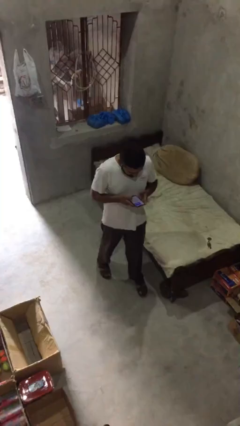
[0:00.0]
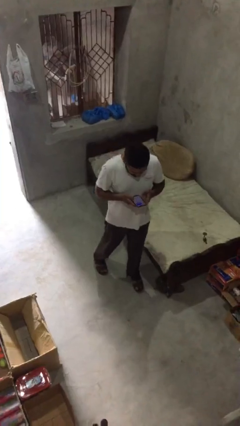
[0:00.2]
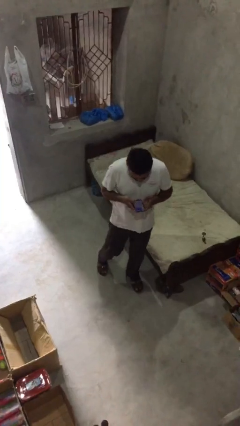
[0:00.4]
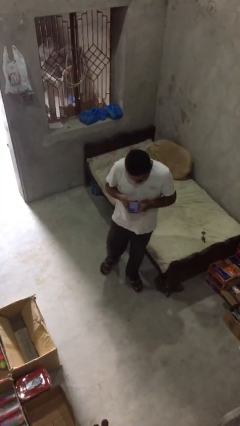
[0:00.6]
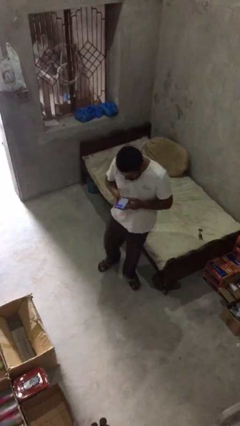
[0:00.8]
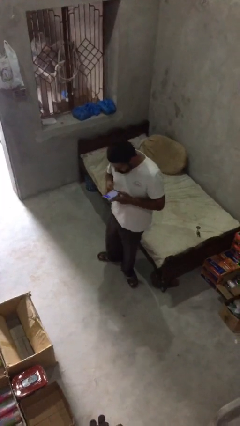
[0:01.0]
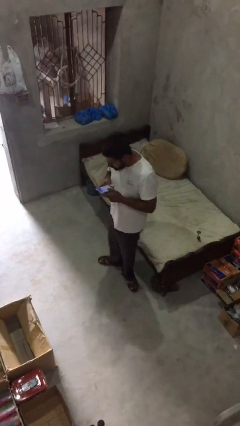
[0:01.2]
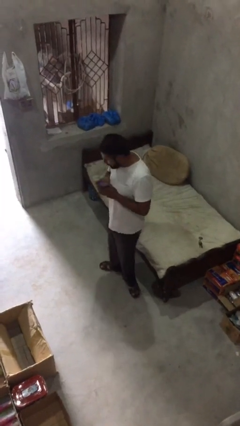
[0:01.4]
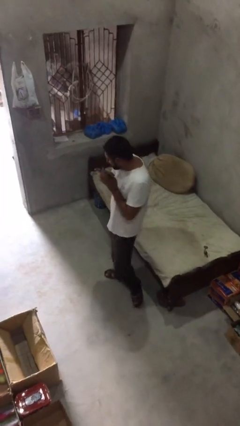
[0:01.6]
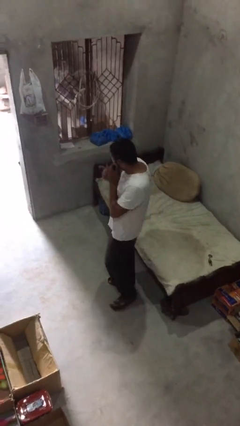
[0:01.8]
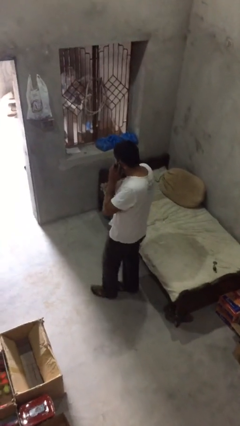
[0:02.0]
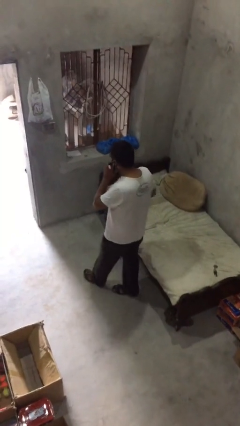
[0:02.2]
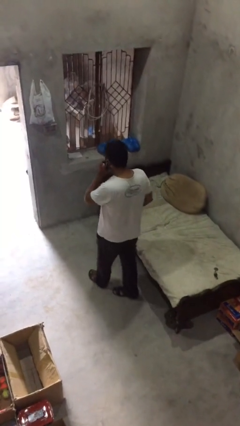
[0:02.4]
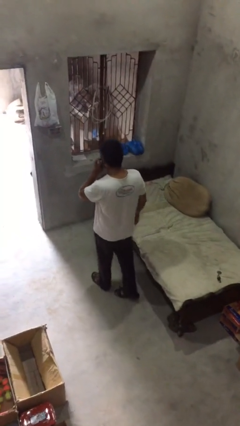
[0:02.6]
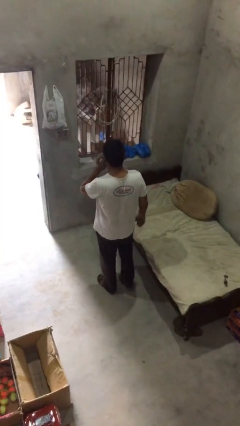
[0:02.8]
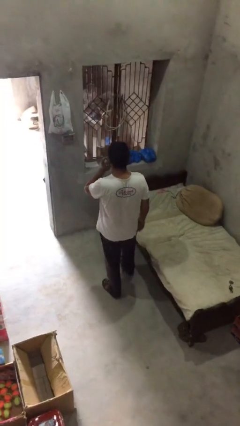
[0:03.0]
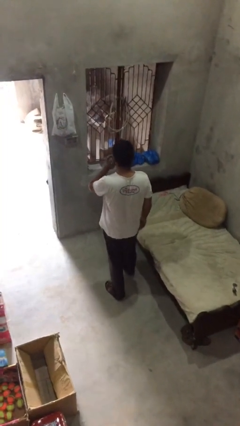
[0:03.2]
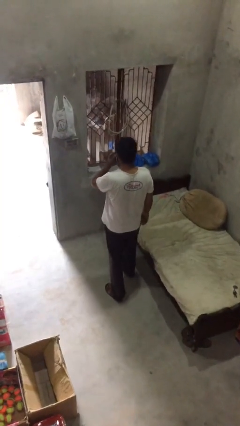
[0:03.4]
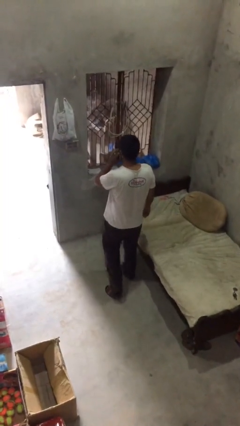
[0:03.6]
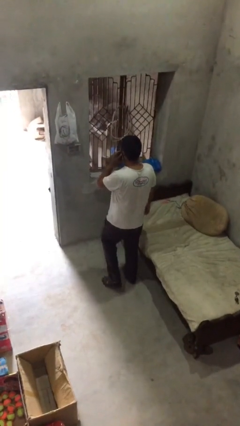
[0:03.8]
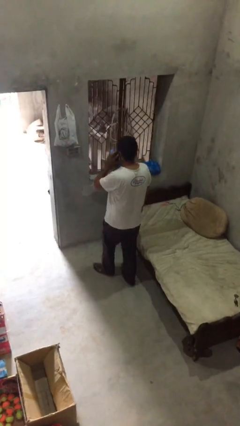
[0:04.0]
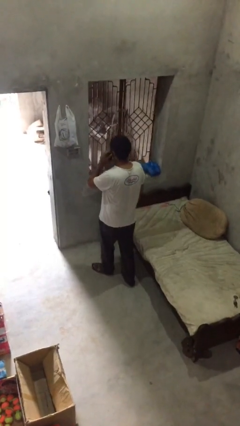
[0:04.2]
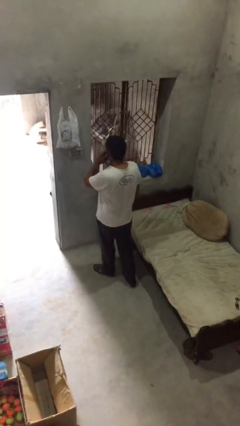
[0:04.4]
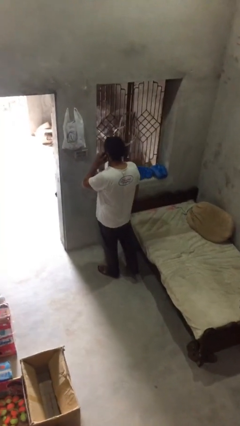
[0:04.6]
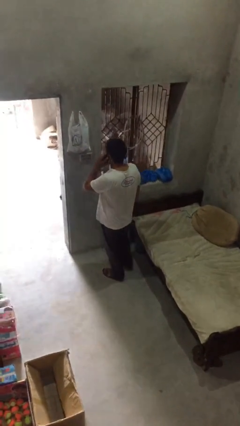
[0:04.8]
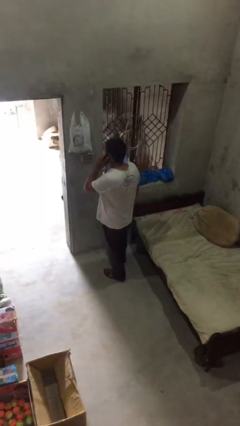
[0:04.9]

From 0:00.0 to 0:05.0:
person talks on phone

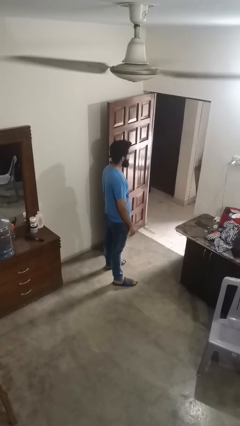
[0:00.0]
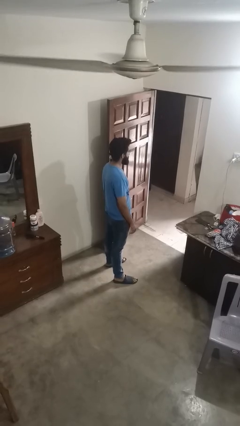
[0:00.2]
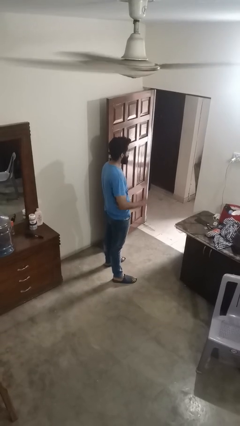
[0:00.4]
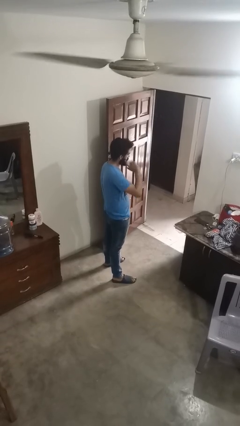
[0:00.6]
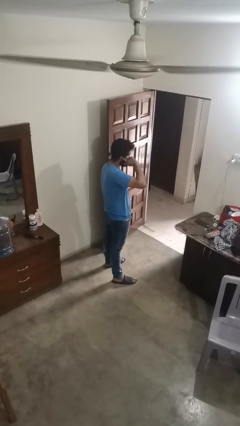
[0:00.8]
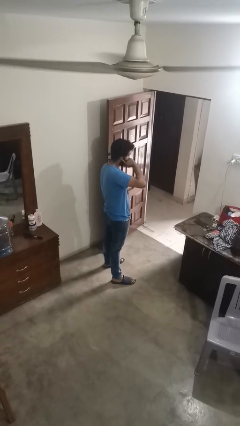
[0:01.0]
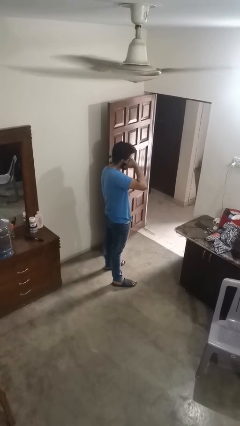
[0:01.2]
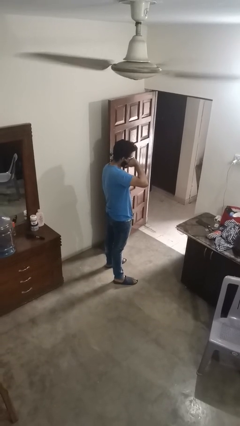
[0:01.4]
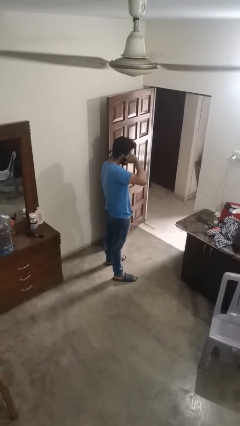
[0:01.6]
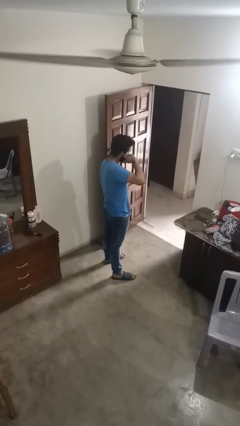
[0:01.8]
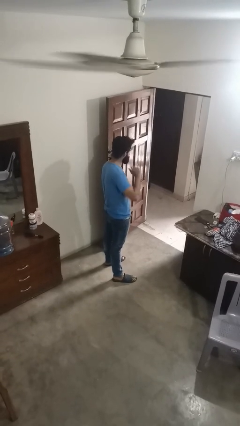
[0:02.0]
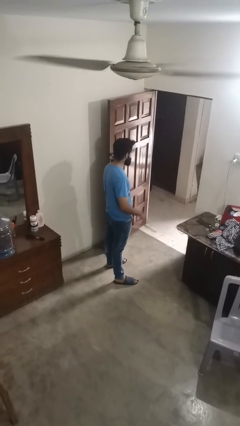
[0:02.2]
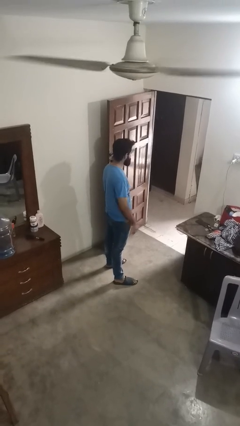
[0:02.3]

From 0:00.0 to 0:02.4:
person touches earlobe

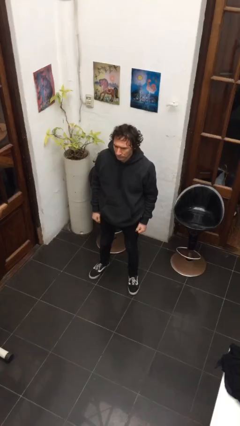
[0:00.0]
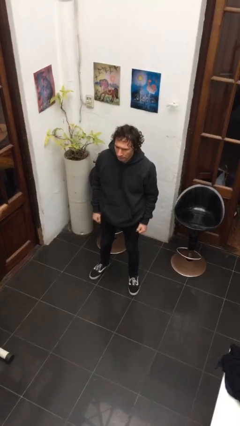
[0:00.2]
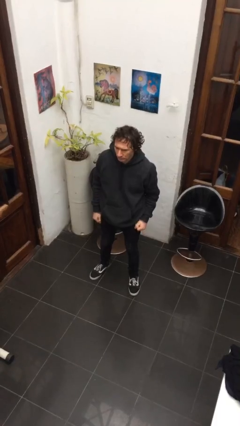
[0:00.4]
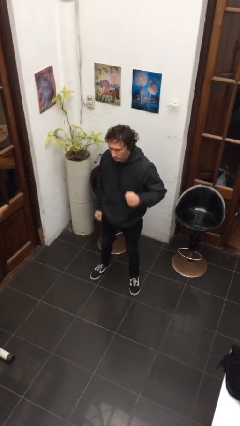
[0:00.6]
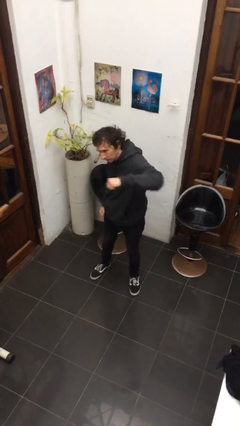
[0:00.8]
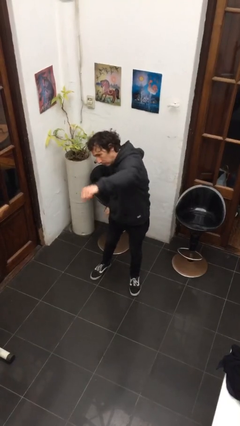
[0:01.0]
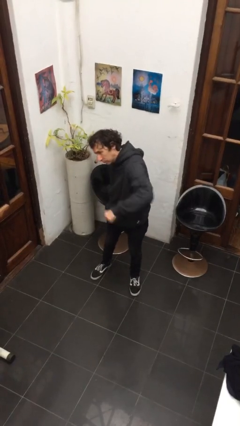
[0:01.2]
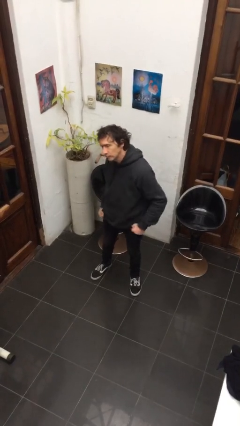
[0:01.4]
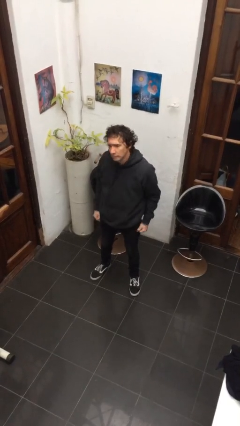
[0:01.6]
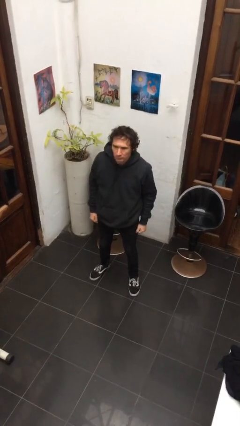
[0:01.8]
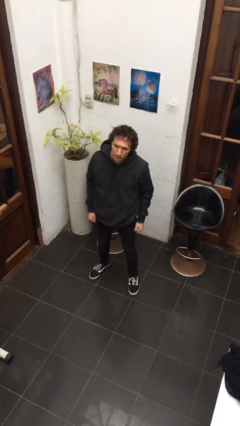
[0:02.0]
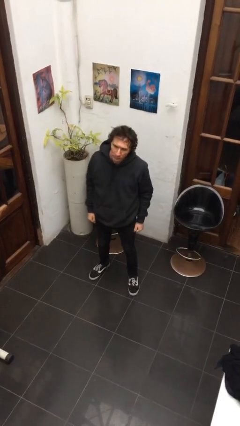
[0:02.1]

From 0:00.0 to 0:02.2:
person punches

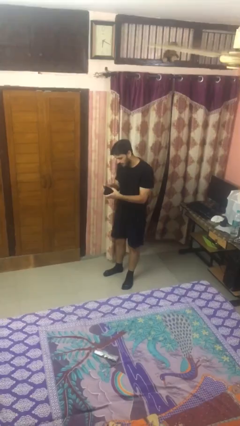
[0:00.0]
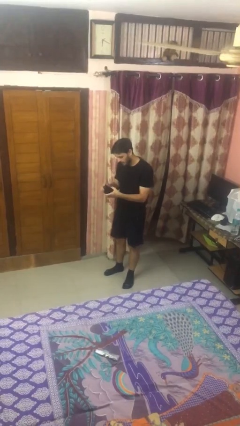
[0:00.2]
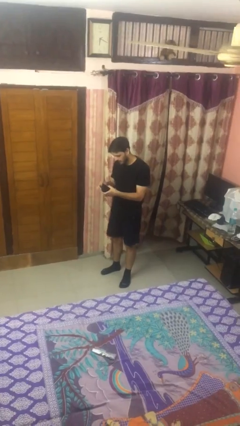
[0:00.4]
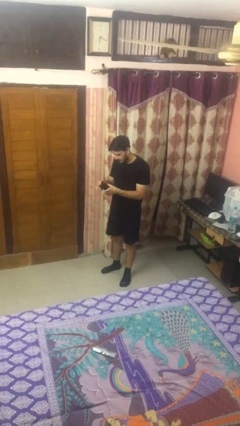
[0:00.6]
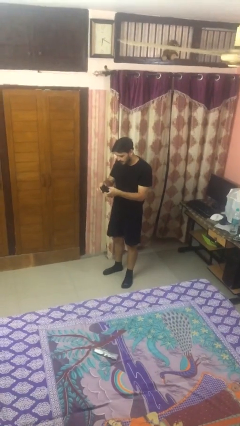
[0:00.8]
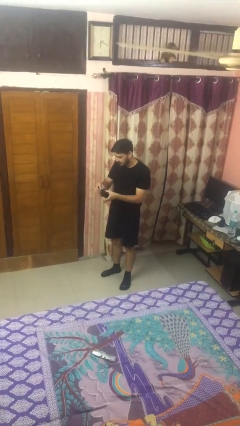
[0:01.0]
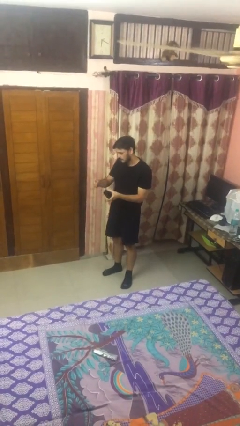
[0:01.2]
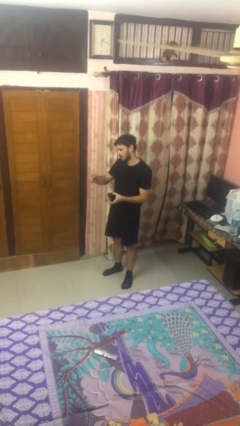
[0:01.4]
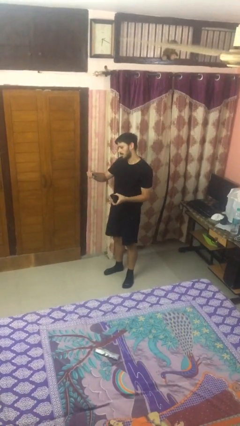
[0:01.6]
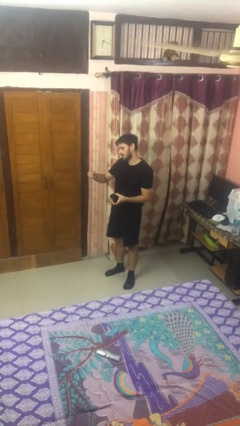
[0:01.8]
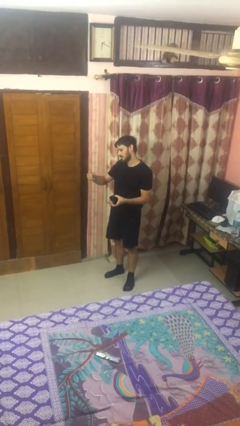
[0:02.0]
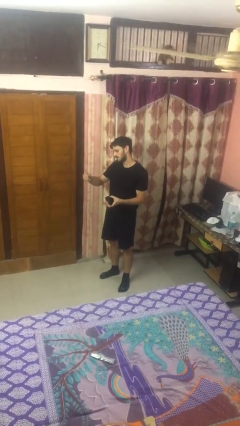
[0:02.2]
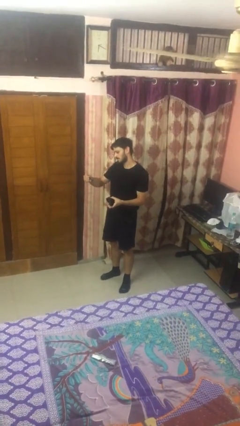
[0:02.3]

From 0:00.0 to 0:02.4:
person takes object from purse

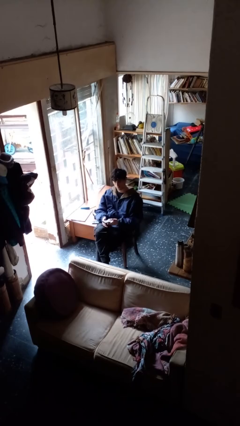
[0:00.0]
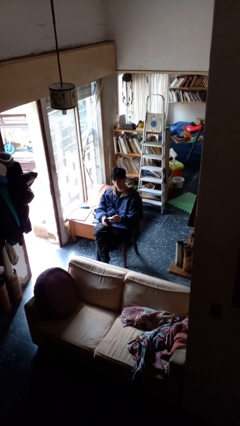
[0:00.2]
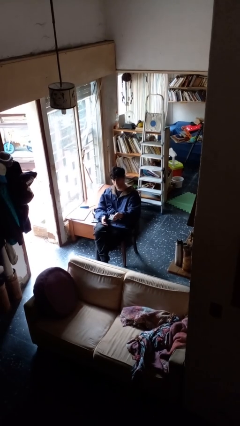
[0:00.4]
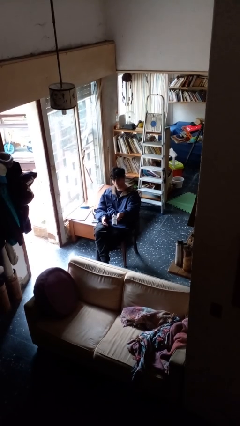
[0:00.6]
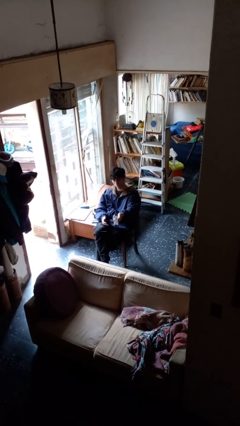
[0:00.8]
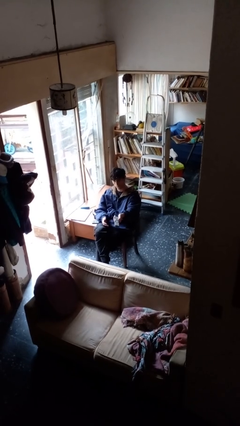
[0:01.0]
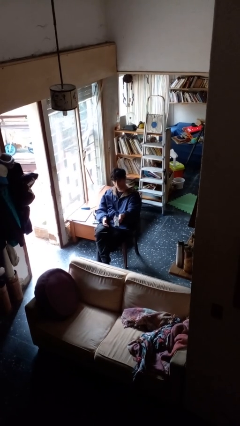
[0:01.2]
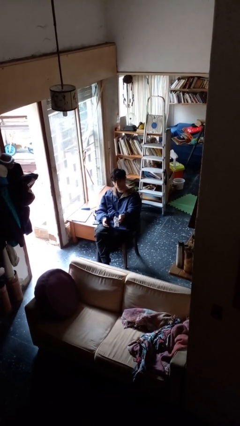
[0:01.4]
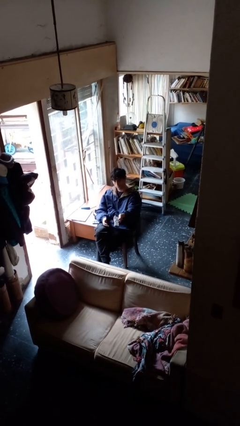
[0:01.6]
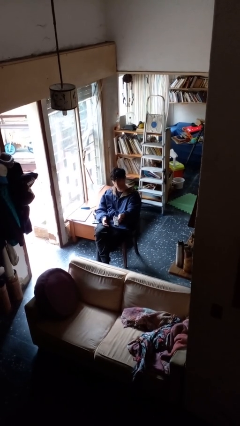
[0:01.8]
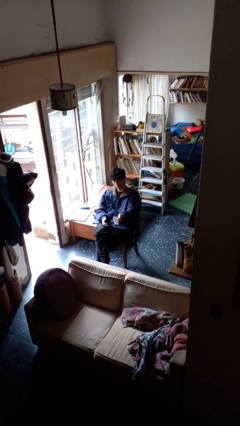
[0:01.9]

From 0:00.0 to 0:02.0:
person uses television remote

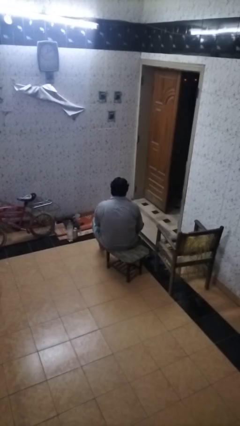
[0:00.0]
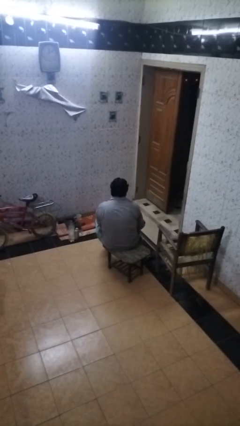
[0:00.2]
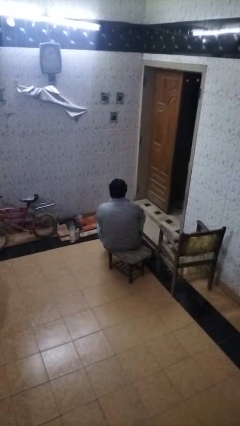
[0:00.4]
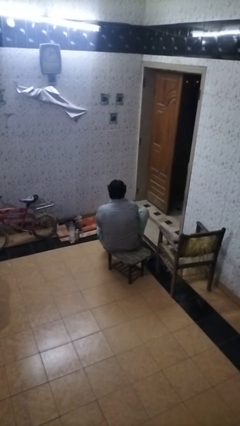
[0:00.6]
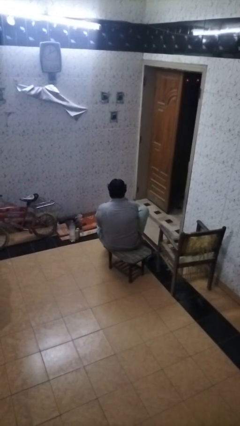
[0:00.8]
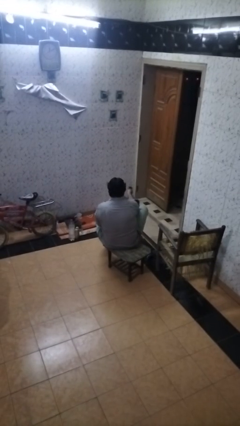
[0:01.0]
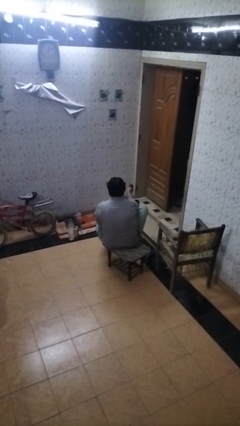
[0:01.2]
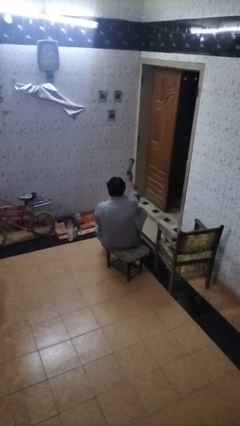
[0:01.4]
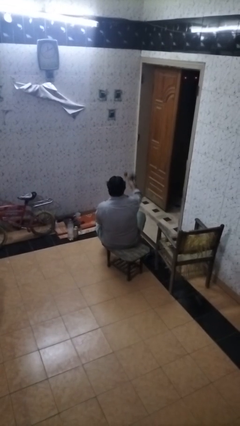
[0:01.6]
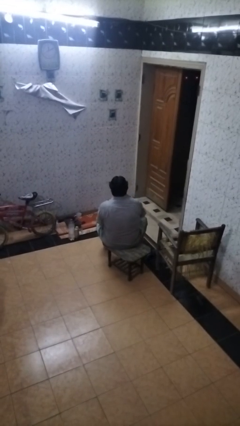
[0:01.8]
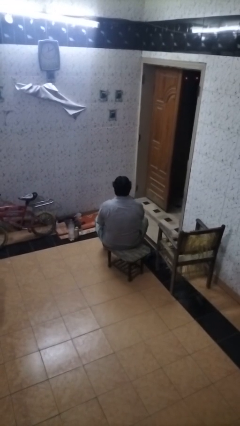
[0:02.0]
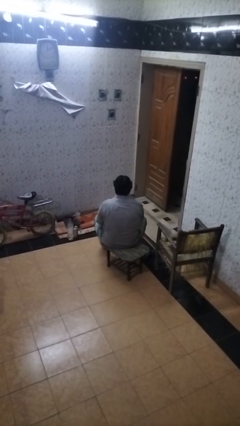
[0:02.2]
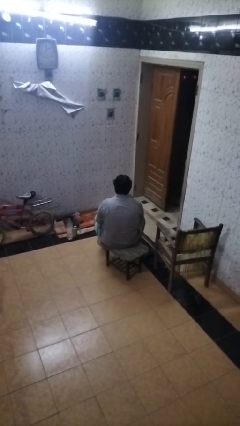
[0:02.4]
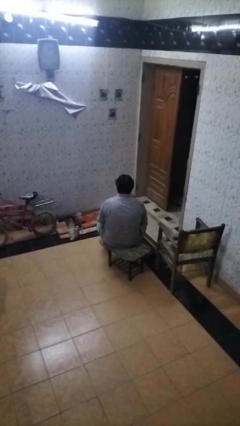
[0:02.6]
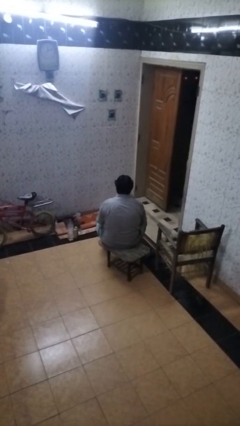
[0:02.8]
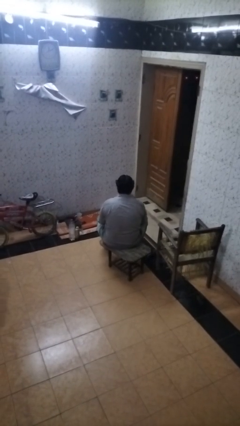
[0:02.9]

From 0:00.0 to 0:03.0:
person takes off socks

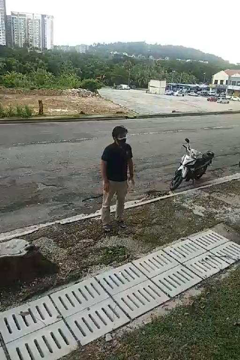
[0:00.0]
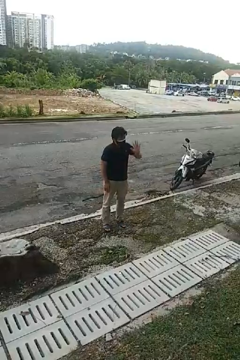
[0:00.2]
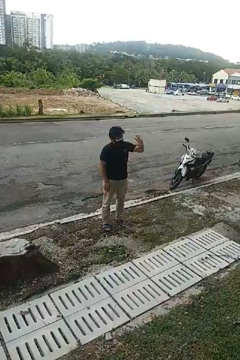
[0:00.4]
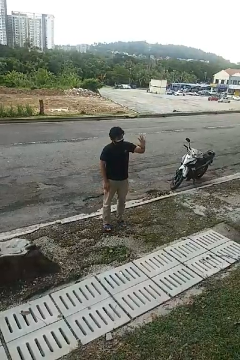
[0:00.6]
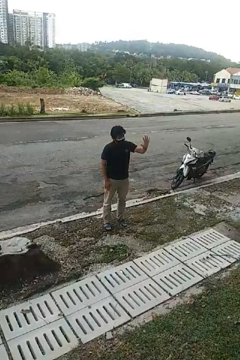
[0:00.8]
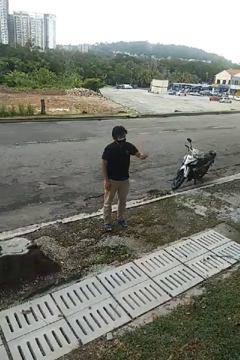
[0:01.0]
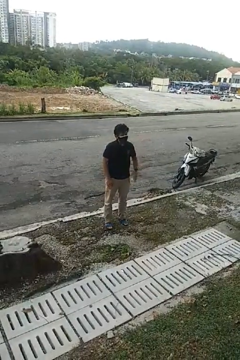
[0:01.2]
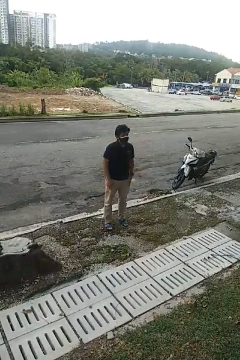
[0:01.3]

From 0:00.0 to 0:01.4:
person gestures number five
